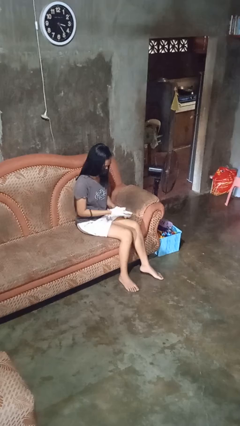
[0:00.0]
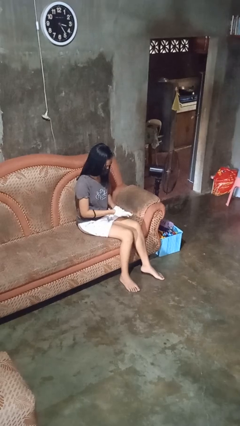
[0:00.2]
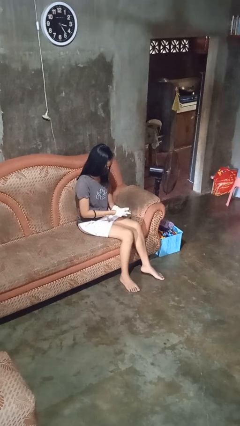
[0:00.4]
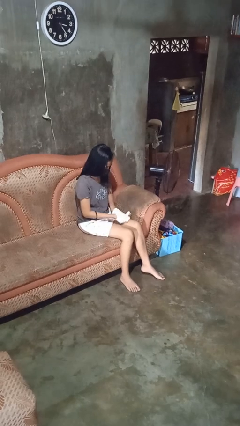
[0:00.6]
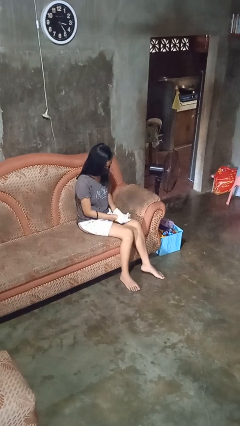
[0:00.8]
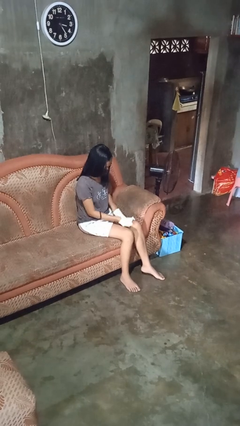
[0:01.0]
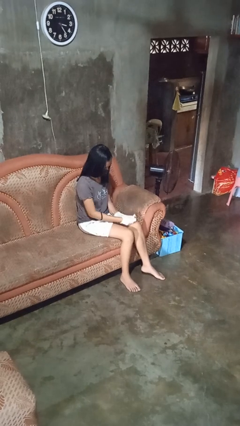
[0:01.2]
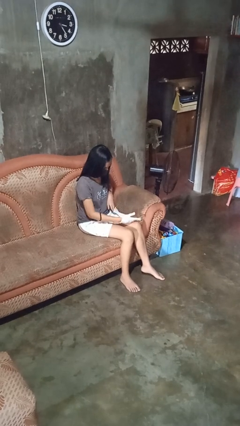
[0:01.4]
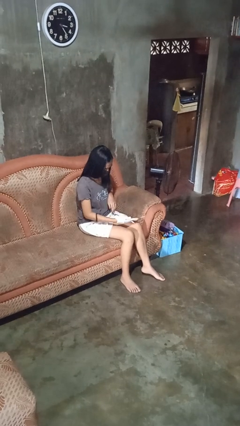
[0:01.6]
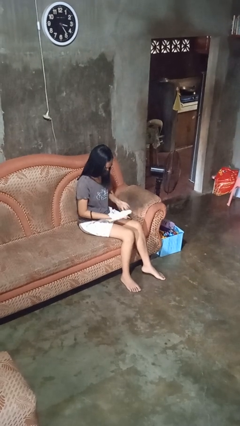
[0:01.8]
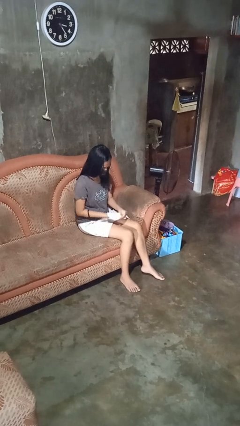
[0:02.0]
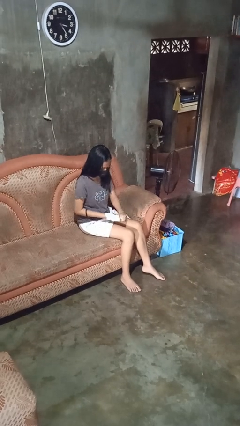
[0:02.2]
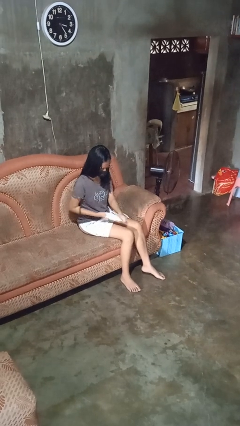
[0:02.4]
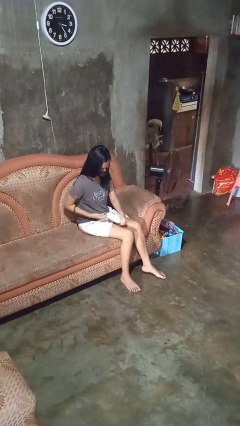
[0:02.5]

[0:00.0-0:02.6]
person takes off gloves

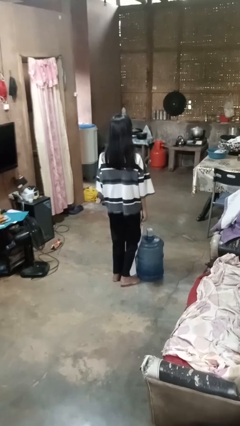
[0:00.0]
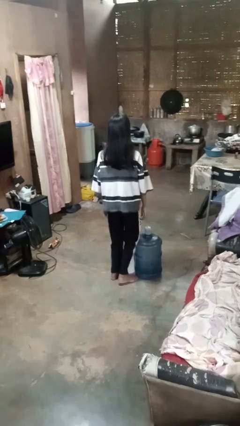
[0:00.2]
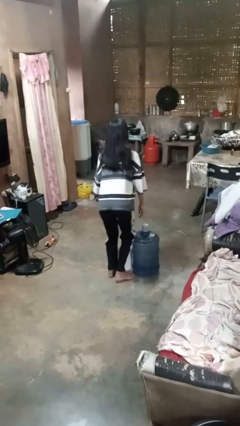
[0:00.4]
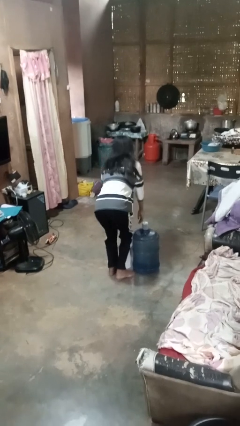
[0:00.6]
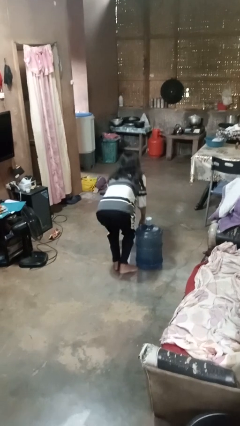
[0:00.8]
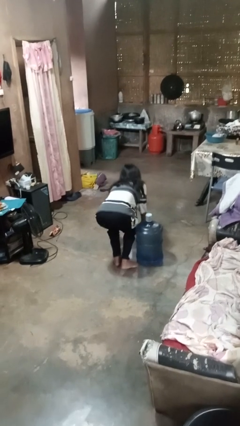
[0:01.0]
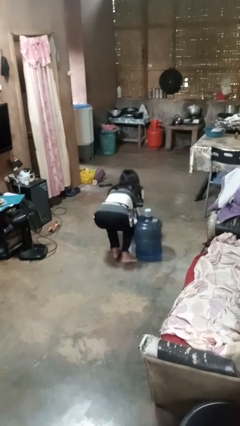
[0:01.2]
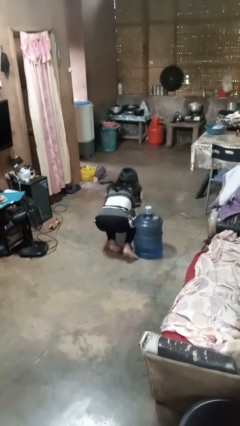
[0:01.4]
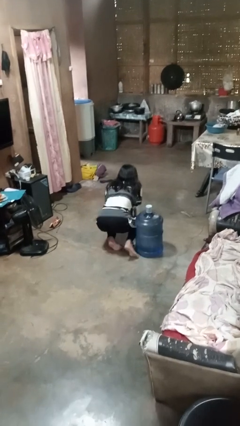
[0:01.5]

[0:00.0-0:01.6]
person trips on object on floor

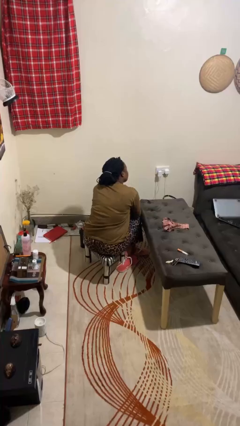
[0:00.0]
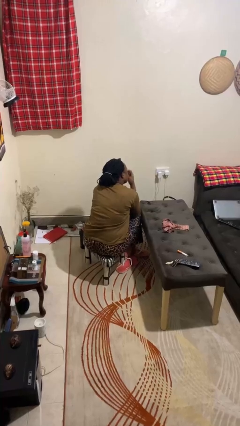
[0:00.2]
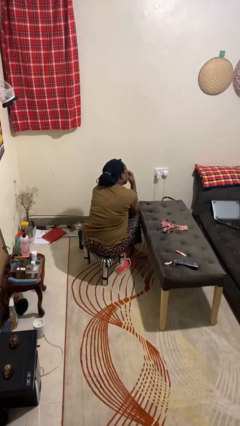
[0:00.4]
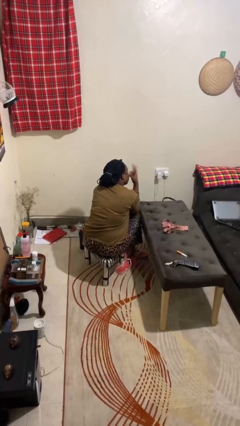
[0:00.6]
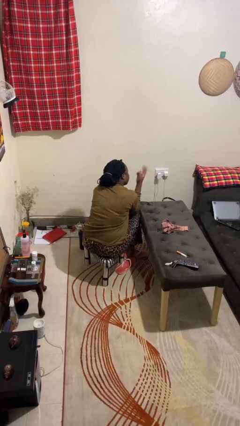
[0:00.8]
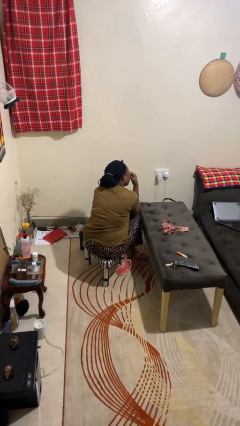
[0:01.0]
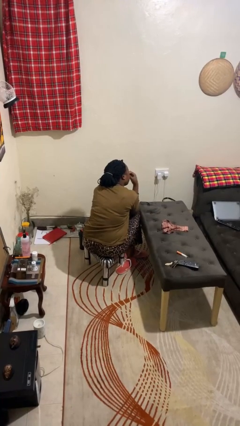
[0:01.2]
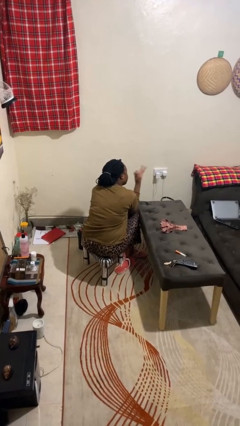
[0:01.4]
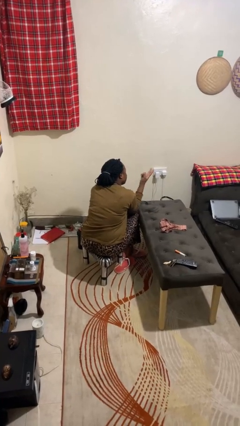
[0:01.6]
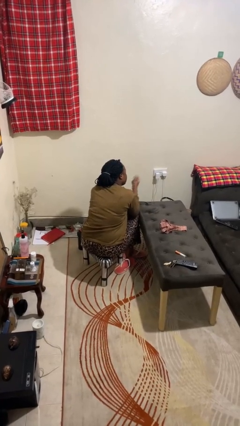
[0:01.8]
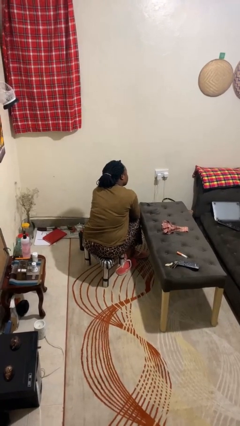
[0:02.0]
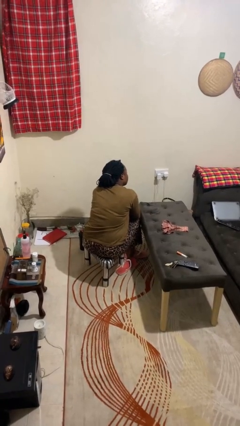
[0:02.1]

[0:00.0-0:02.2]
person gestures watch closely

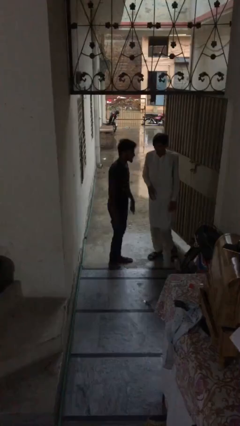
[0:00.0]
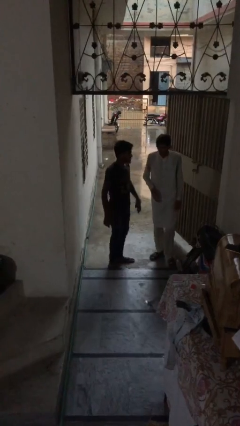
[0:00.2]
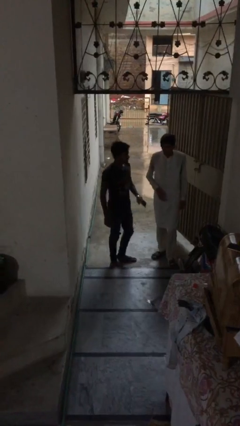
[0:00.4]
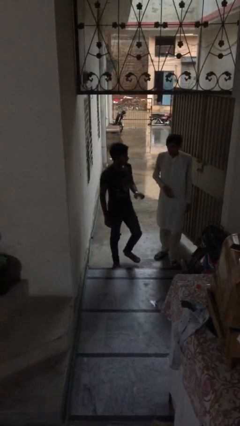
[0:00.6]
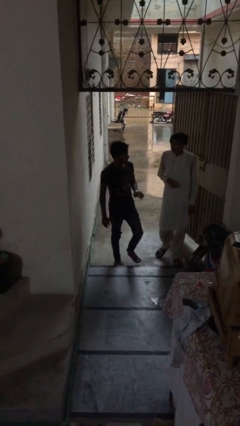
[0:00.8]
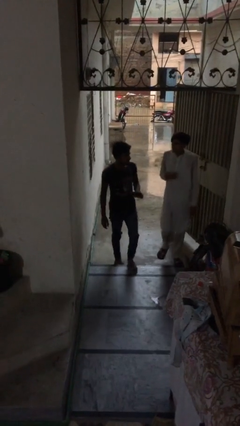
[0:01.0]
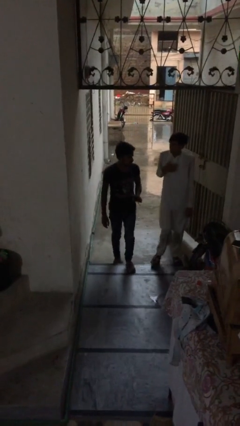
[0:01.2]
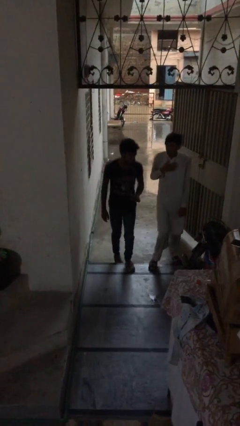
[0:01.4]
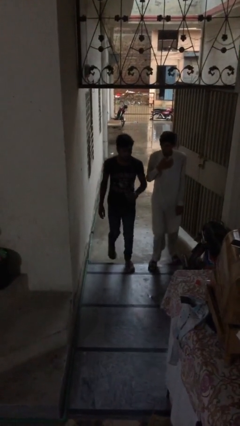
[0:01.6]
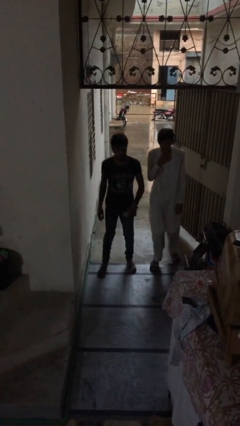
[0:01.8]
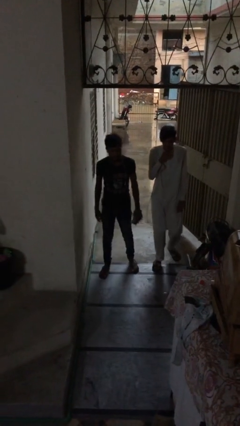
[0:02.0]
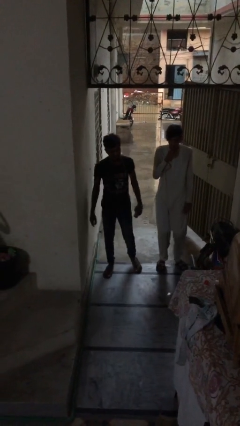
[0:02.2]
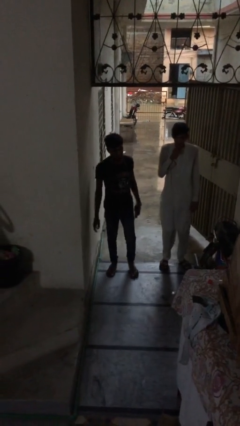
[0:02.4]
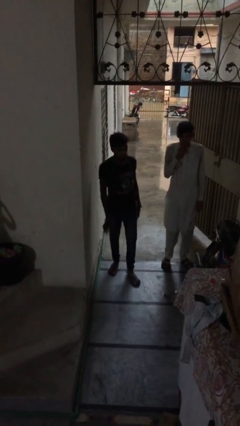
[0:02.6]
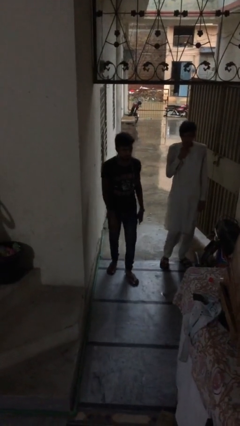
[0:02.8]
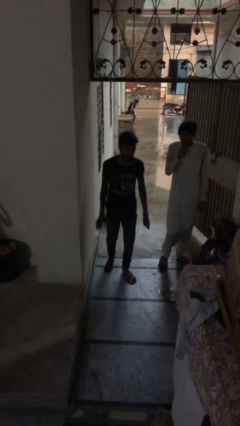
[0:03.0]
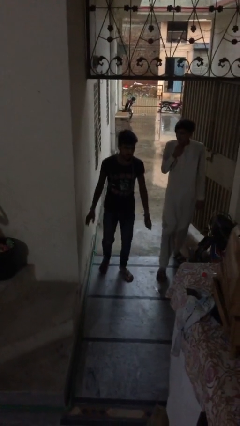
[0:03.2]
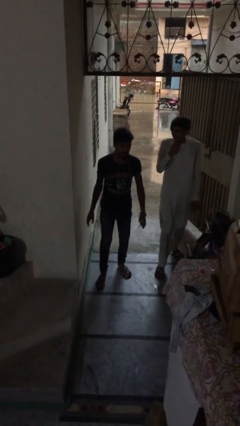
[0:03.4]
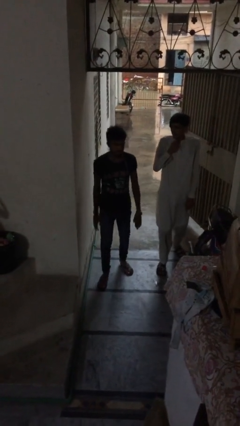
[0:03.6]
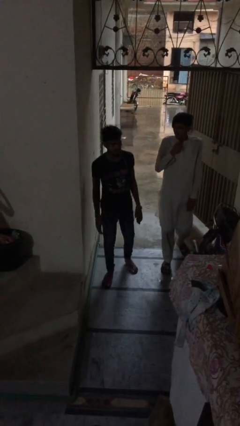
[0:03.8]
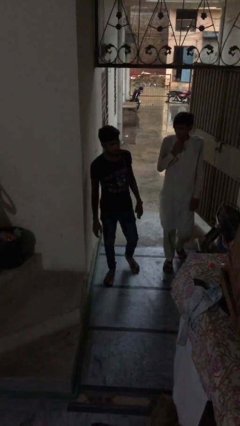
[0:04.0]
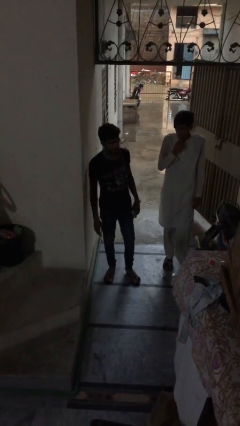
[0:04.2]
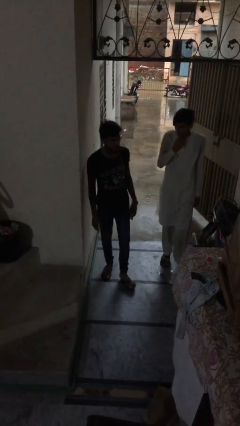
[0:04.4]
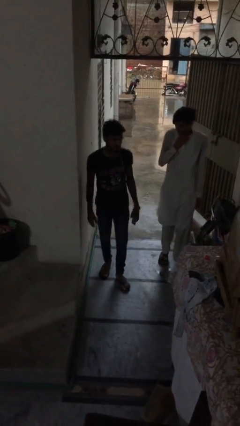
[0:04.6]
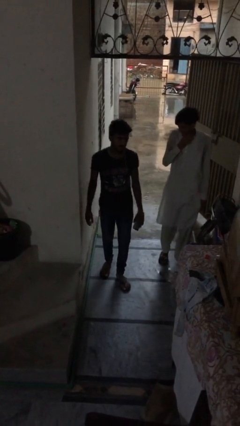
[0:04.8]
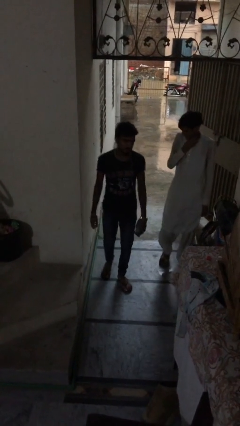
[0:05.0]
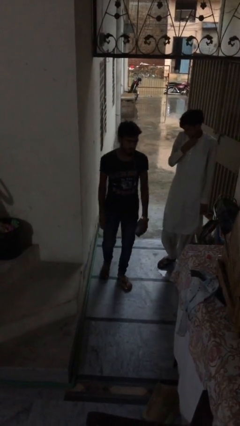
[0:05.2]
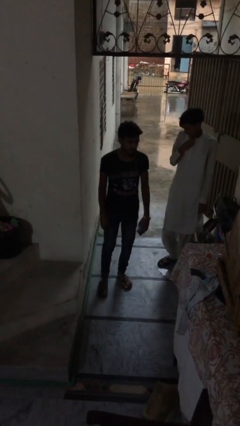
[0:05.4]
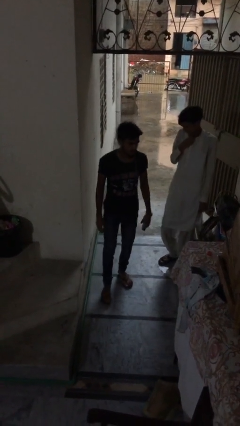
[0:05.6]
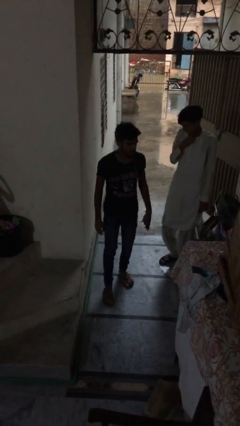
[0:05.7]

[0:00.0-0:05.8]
person talks to person

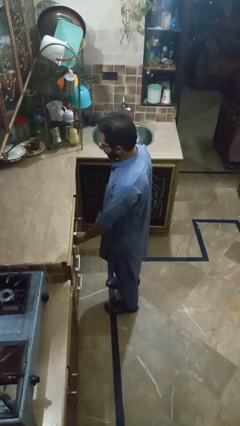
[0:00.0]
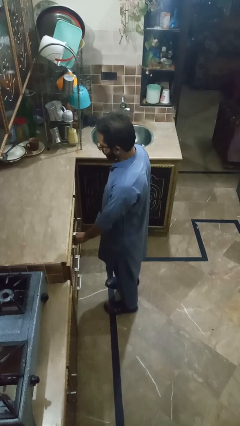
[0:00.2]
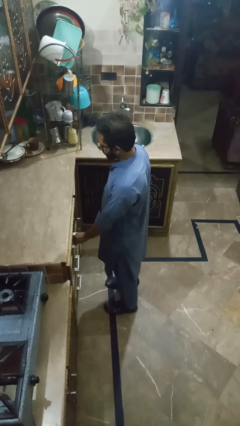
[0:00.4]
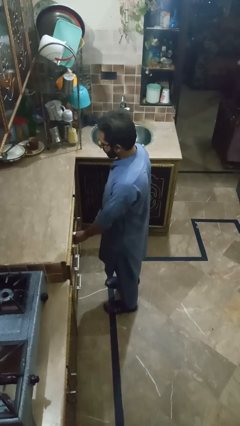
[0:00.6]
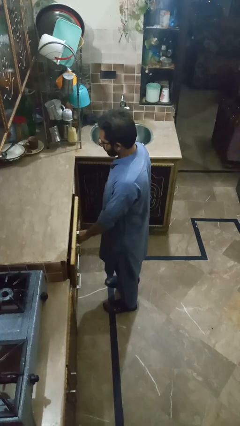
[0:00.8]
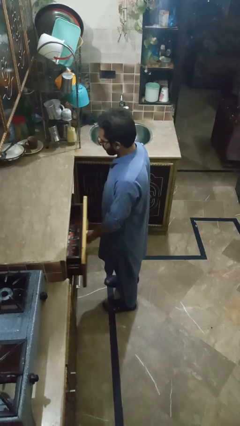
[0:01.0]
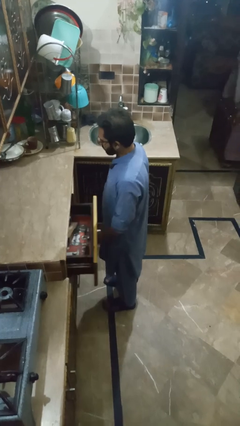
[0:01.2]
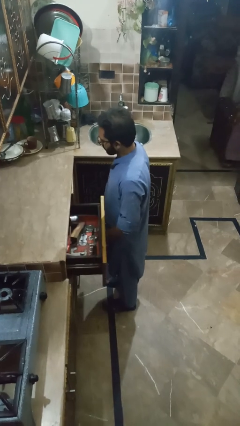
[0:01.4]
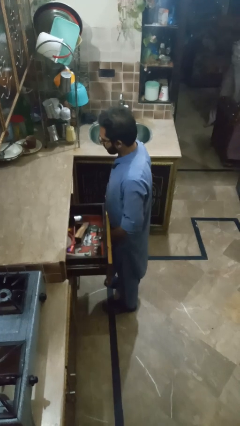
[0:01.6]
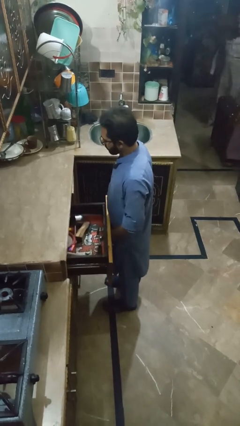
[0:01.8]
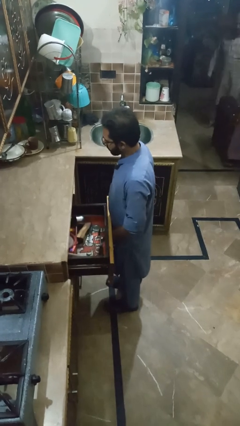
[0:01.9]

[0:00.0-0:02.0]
person opens kitchen drawer

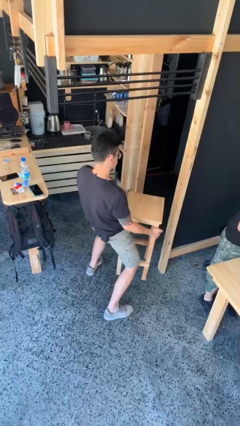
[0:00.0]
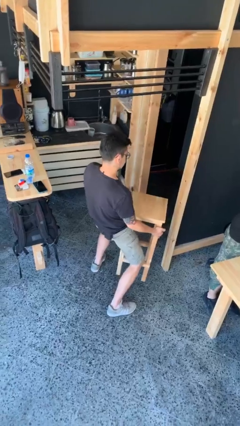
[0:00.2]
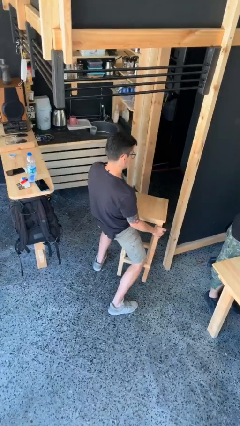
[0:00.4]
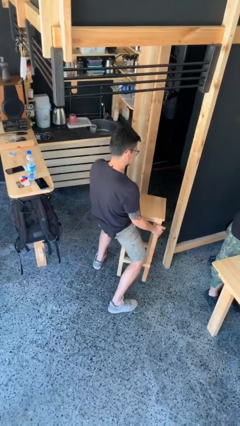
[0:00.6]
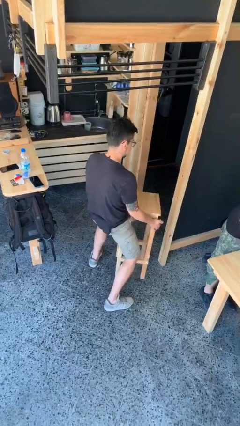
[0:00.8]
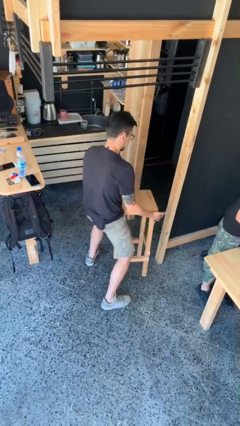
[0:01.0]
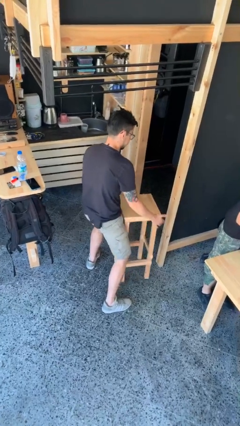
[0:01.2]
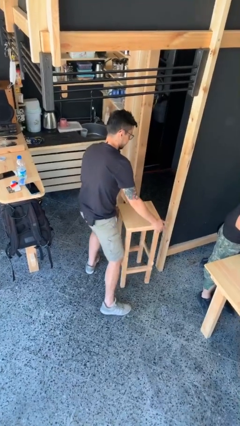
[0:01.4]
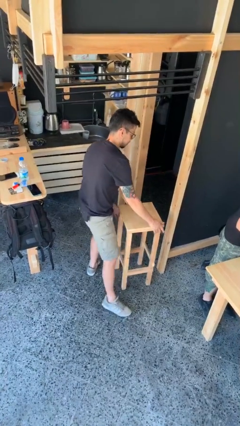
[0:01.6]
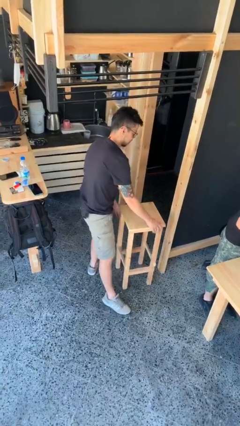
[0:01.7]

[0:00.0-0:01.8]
person puts down object on floor

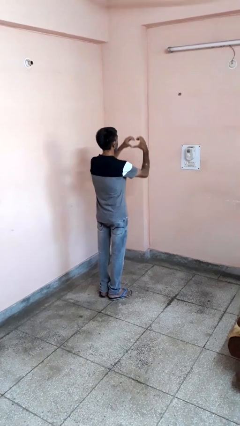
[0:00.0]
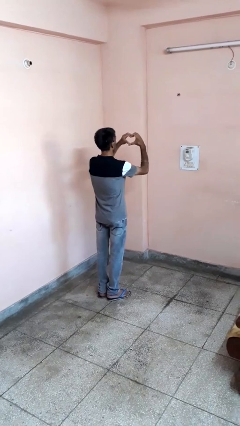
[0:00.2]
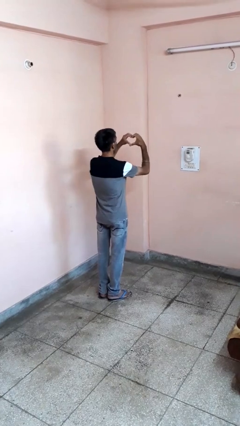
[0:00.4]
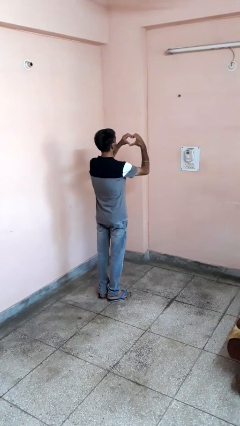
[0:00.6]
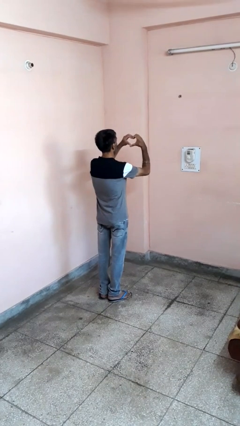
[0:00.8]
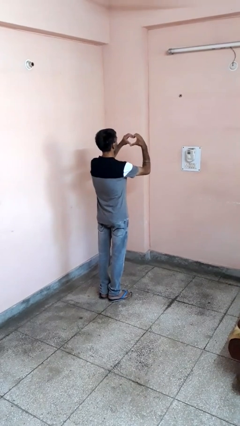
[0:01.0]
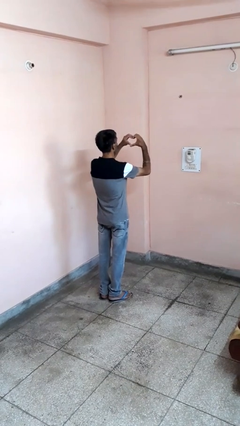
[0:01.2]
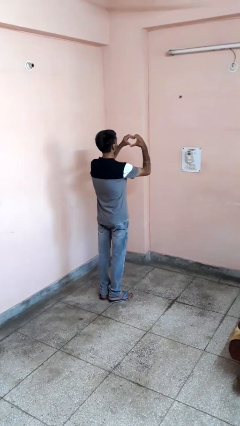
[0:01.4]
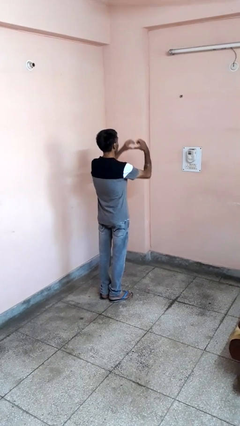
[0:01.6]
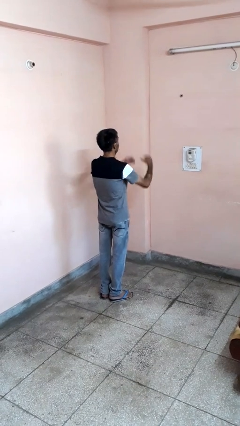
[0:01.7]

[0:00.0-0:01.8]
person gestures heart
